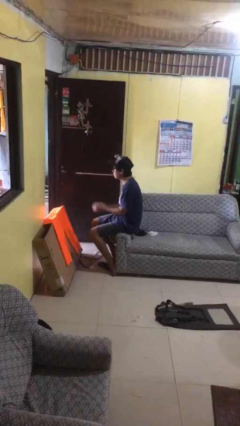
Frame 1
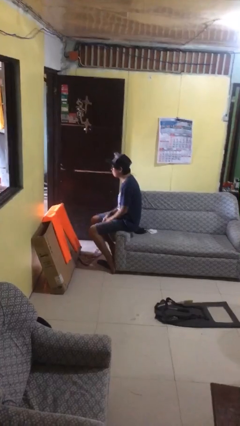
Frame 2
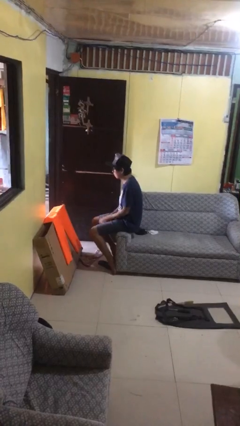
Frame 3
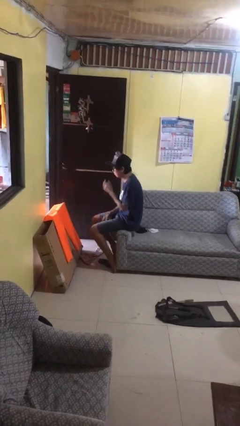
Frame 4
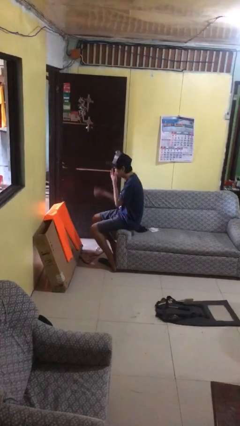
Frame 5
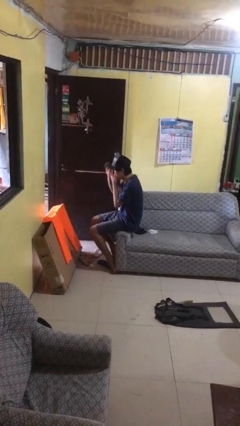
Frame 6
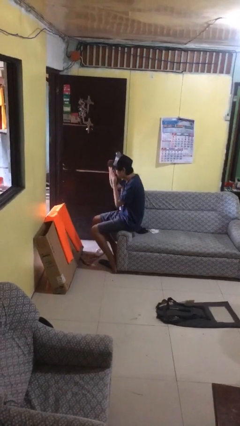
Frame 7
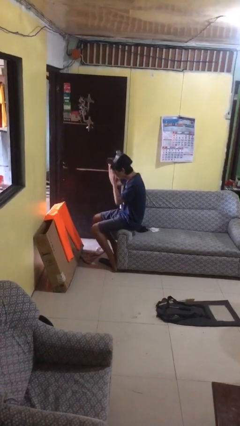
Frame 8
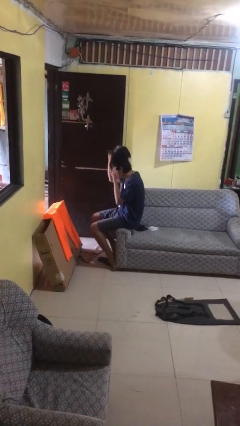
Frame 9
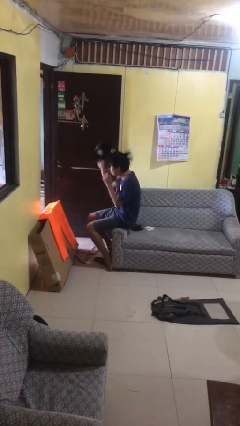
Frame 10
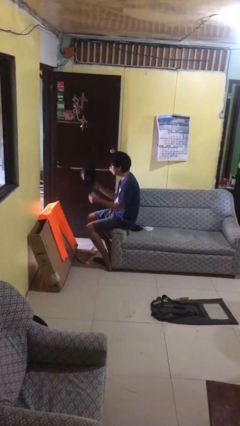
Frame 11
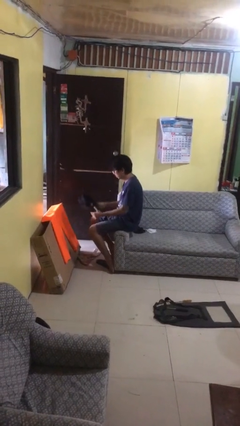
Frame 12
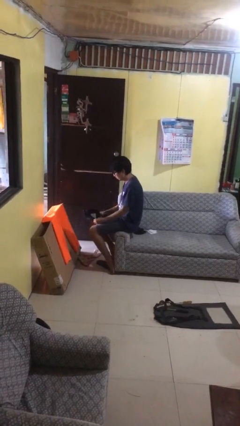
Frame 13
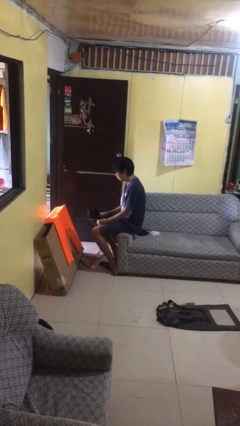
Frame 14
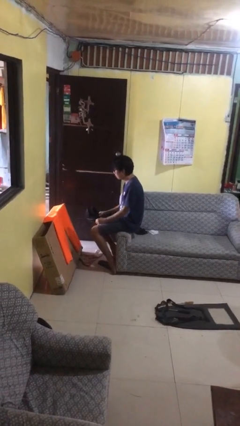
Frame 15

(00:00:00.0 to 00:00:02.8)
person takes off hat

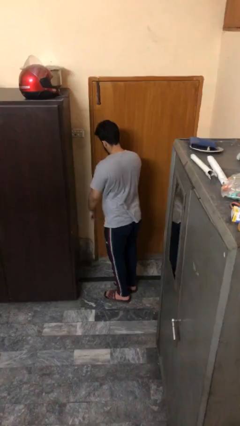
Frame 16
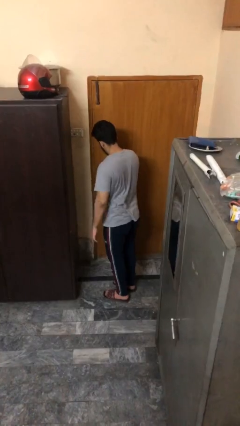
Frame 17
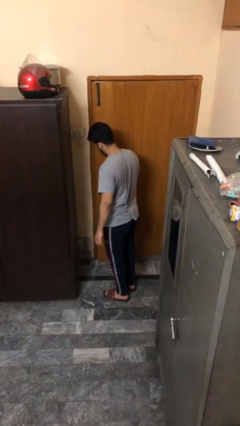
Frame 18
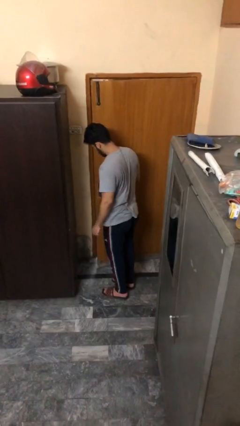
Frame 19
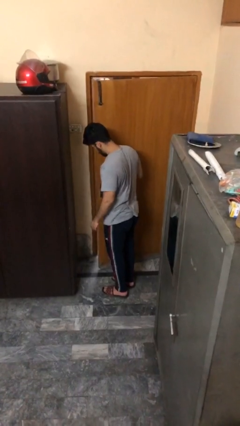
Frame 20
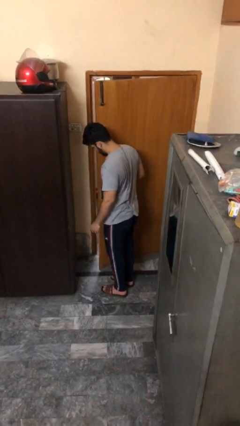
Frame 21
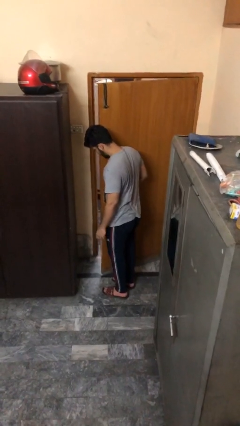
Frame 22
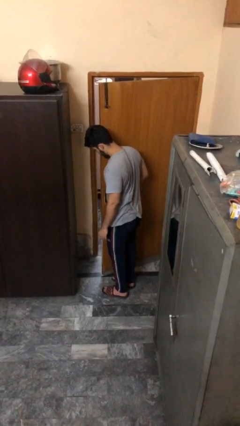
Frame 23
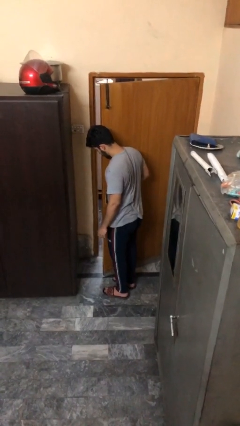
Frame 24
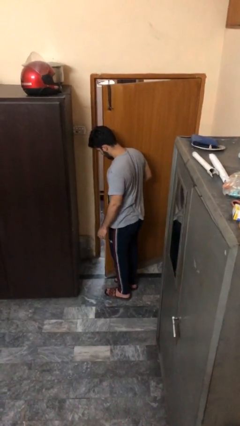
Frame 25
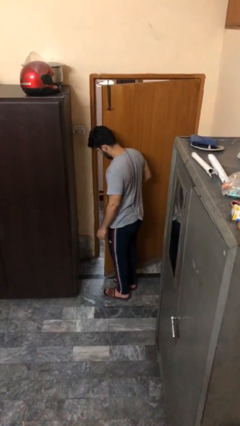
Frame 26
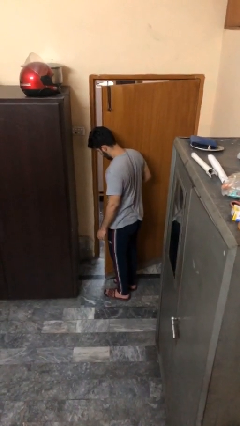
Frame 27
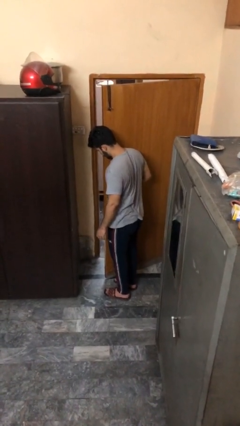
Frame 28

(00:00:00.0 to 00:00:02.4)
person opens facility door

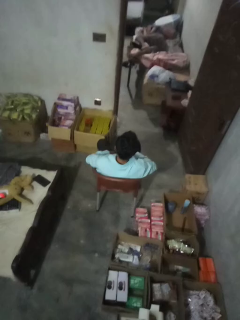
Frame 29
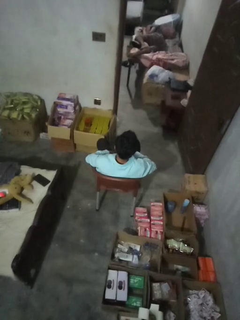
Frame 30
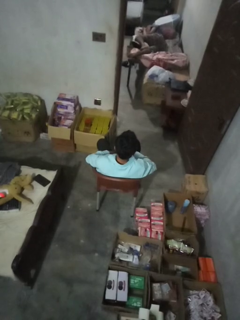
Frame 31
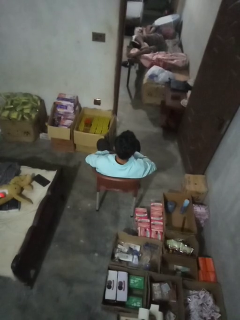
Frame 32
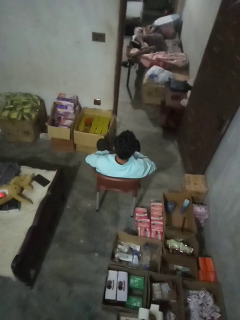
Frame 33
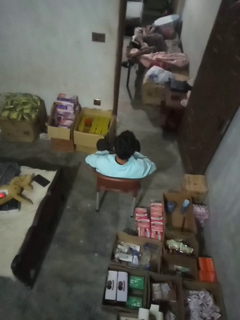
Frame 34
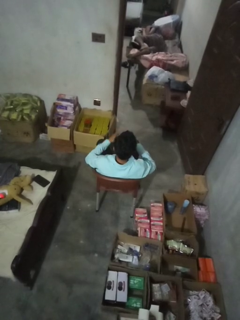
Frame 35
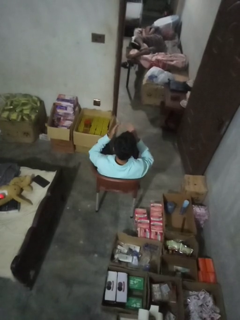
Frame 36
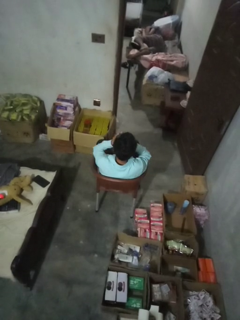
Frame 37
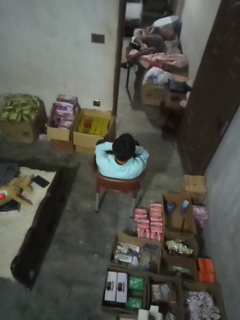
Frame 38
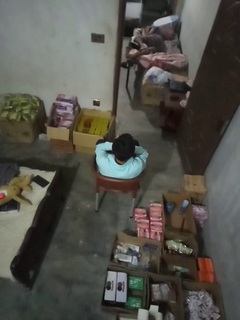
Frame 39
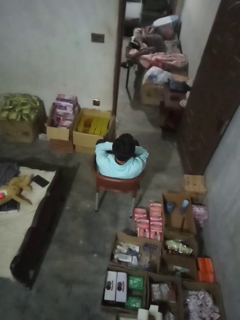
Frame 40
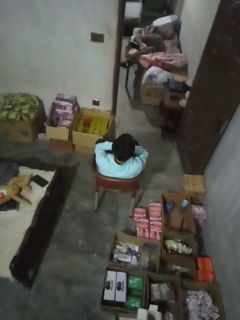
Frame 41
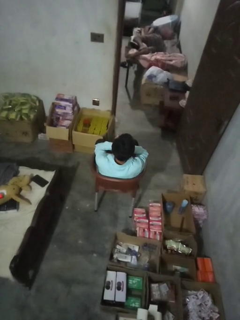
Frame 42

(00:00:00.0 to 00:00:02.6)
person covers face with hands

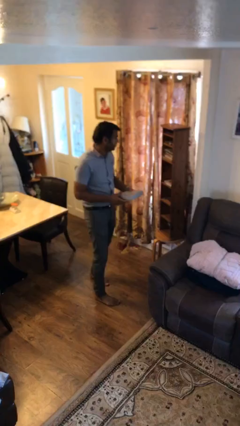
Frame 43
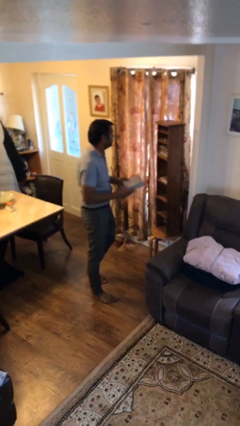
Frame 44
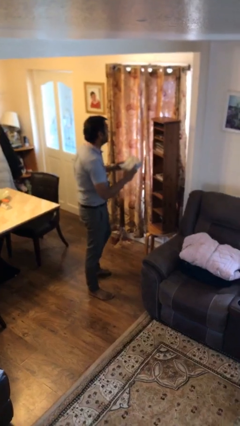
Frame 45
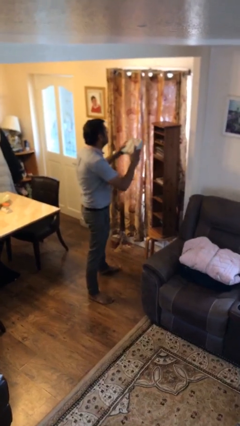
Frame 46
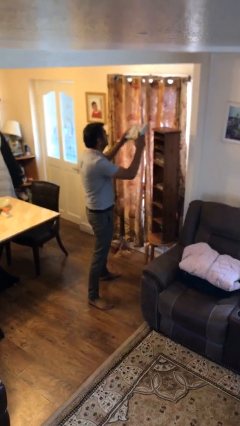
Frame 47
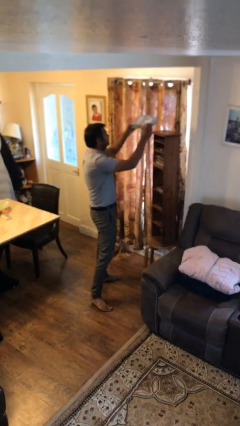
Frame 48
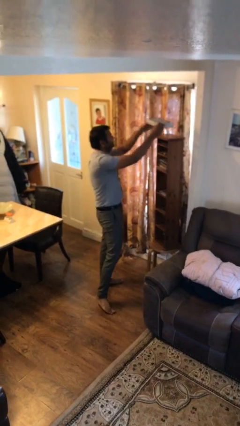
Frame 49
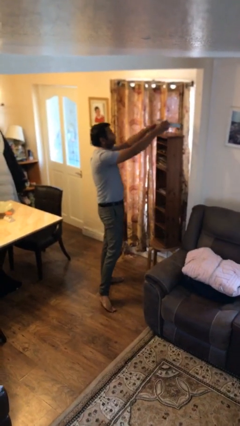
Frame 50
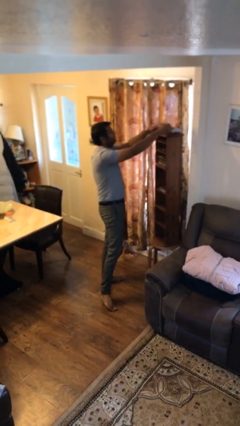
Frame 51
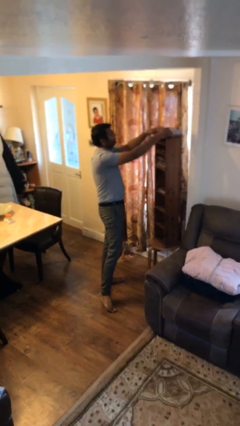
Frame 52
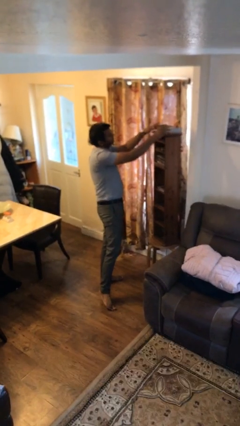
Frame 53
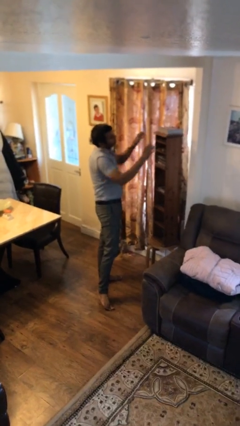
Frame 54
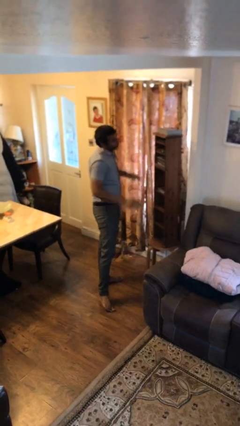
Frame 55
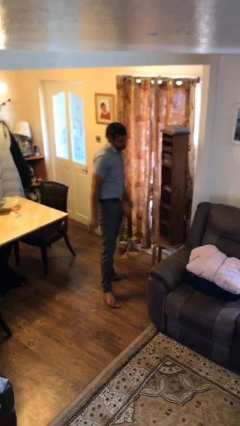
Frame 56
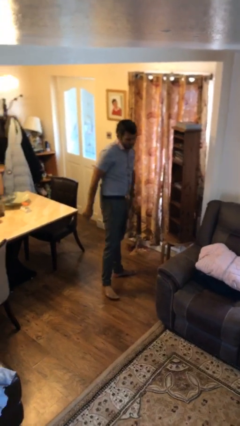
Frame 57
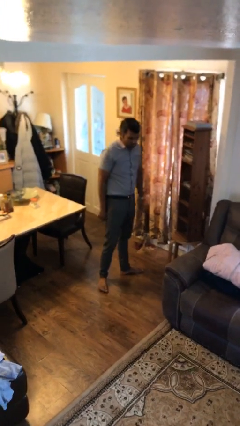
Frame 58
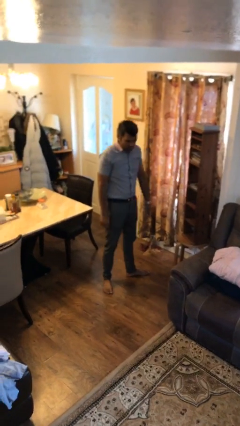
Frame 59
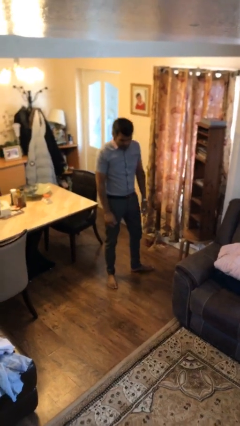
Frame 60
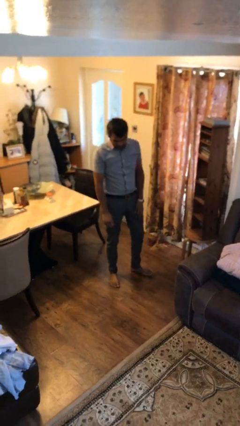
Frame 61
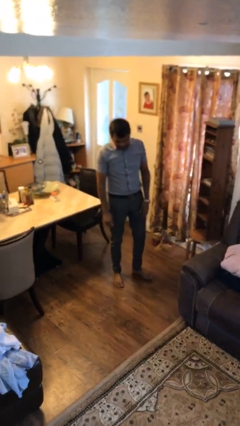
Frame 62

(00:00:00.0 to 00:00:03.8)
person puts down object on shelf

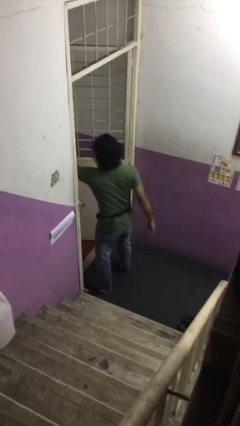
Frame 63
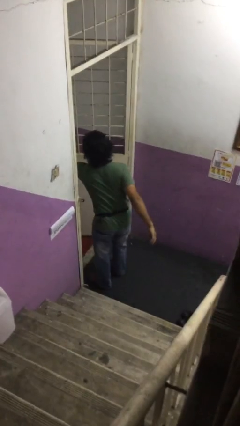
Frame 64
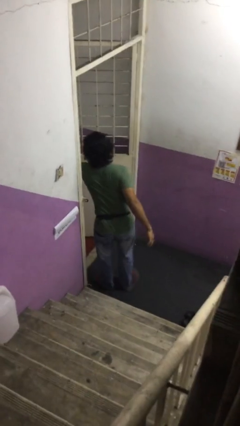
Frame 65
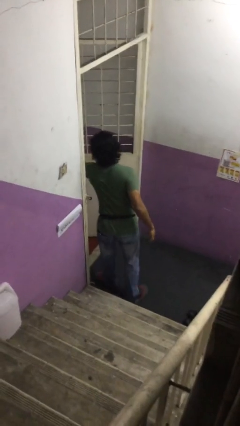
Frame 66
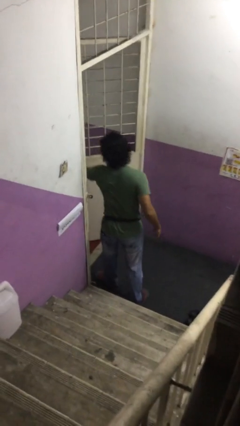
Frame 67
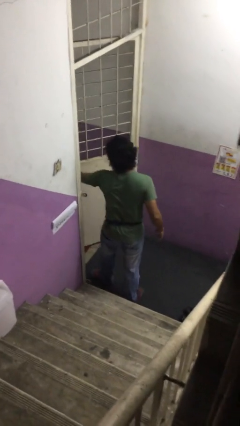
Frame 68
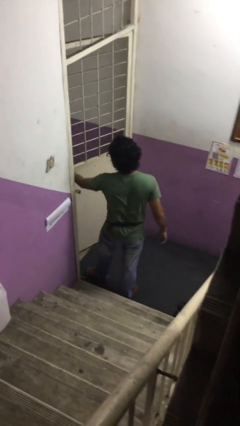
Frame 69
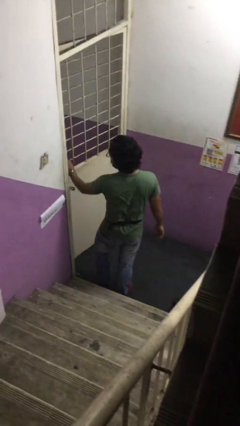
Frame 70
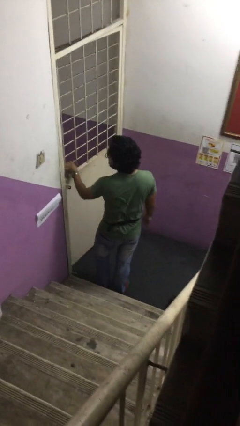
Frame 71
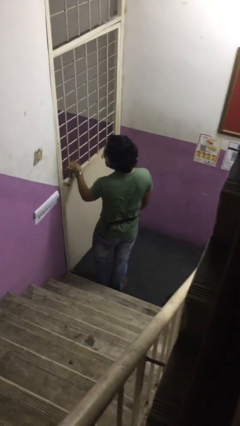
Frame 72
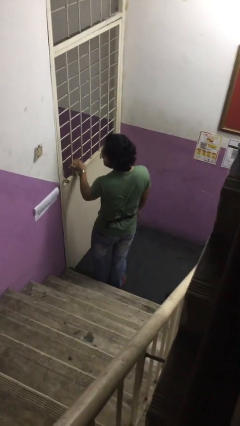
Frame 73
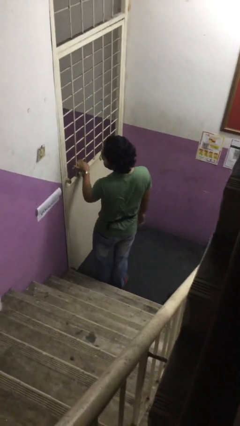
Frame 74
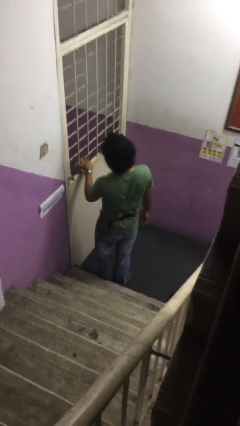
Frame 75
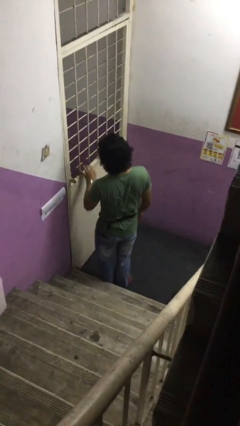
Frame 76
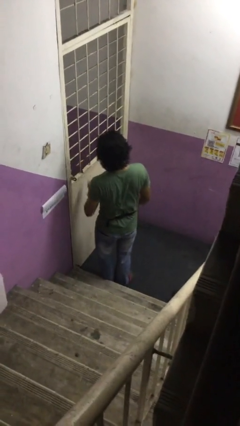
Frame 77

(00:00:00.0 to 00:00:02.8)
person closes facility door

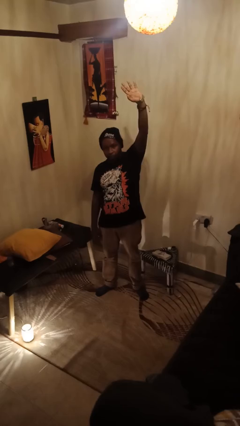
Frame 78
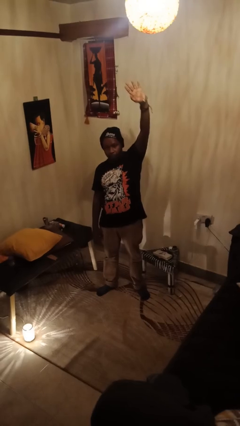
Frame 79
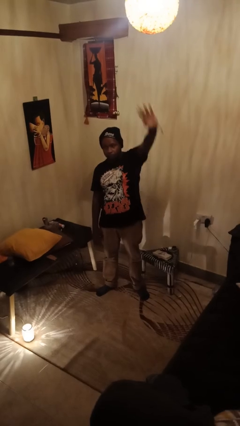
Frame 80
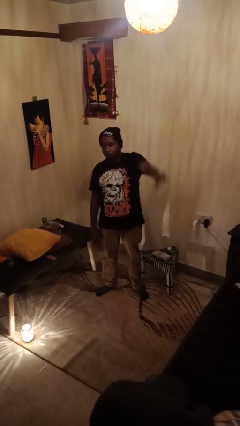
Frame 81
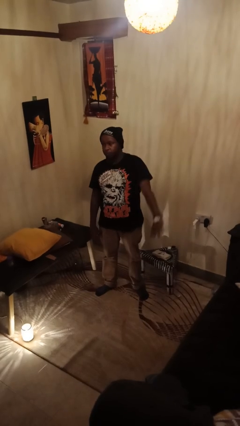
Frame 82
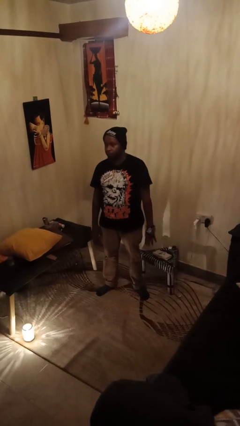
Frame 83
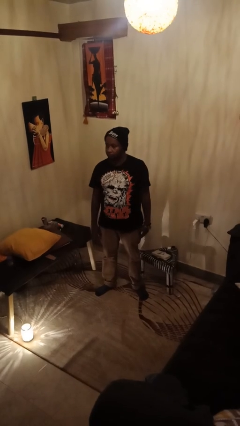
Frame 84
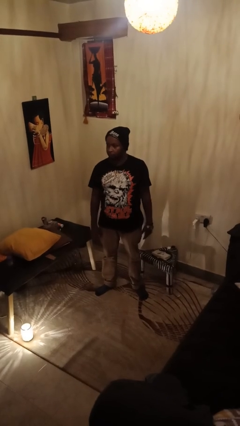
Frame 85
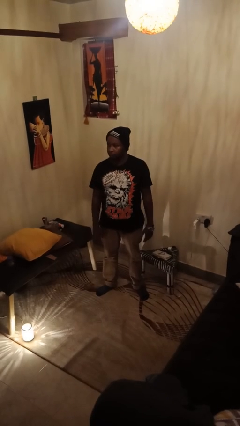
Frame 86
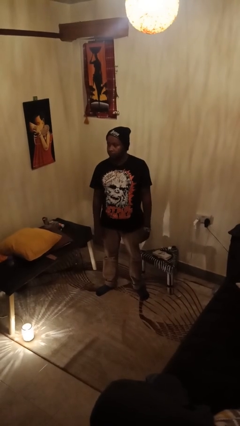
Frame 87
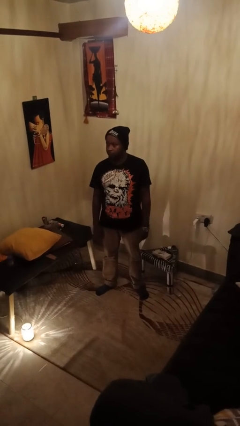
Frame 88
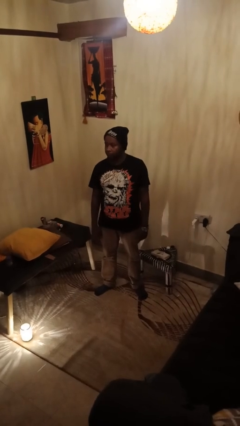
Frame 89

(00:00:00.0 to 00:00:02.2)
person gestures lower hand

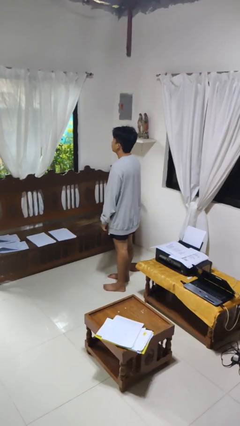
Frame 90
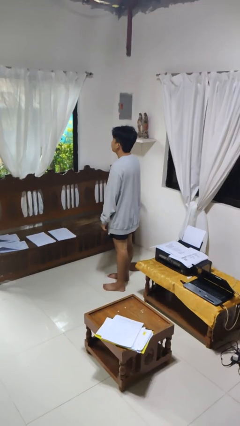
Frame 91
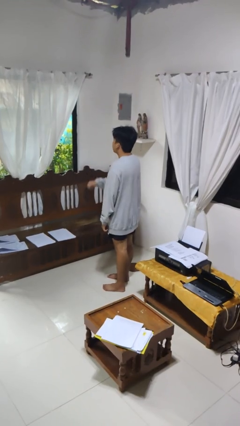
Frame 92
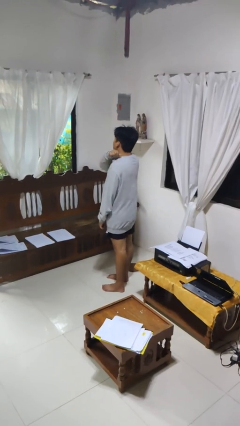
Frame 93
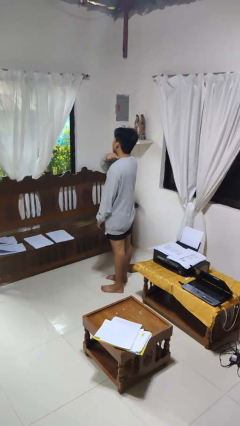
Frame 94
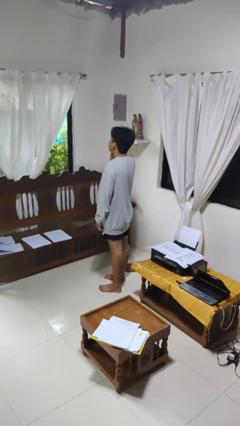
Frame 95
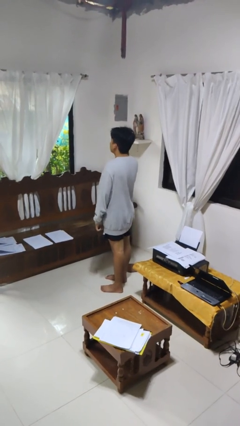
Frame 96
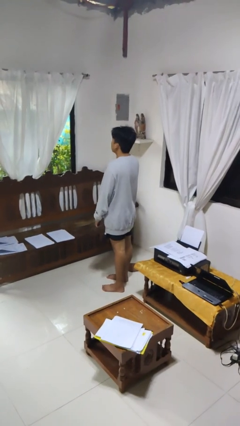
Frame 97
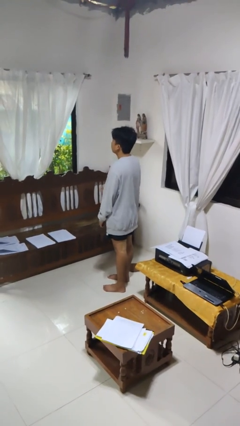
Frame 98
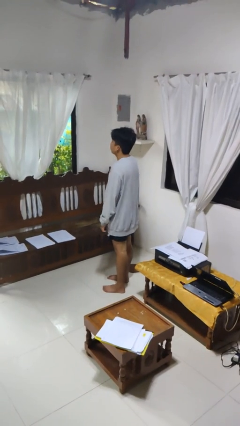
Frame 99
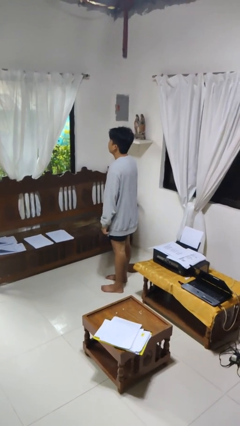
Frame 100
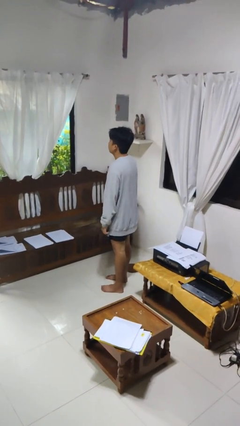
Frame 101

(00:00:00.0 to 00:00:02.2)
person gestures cut
